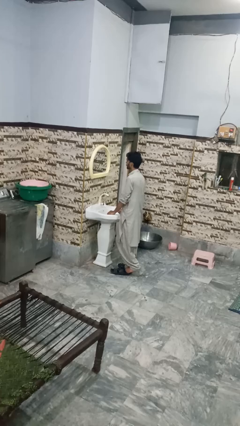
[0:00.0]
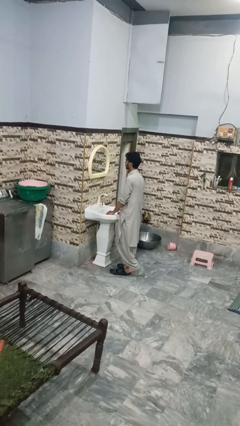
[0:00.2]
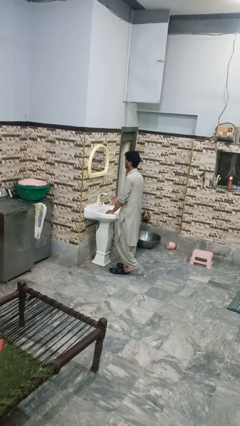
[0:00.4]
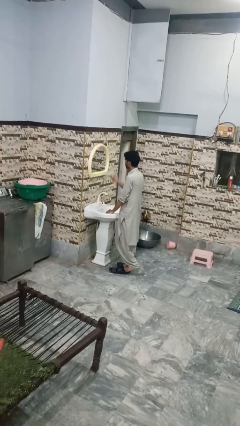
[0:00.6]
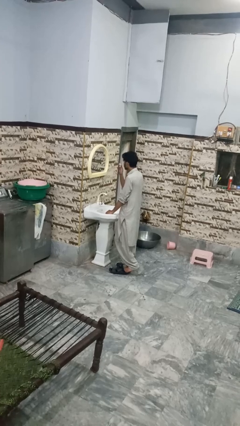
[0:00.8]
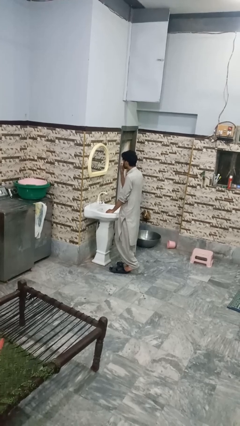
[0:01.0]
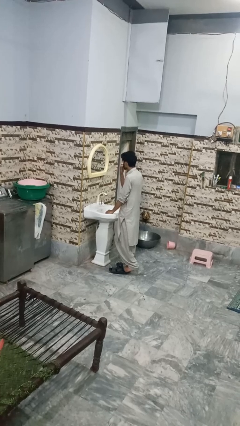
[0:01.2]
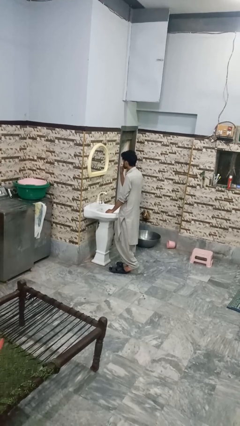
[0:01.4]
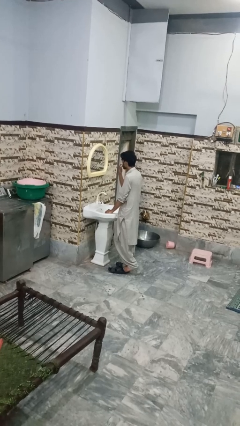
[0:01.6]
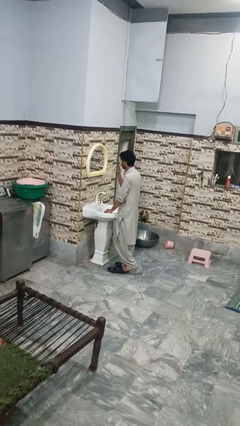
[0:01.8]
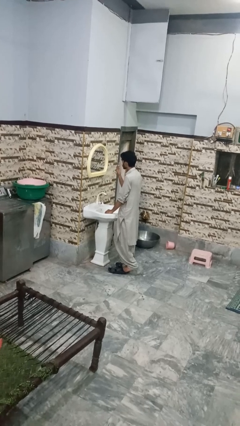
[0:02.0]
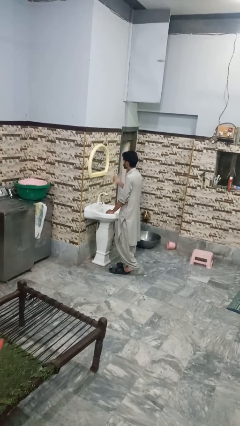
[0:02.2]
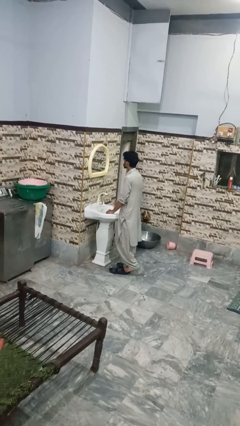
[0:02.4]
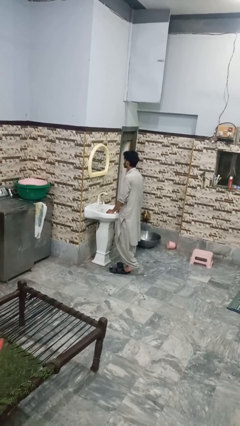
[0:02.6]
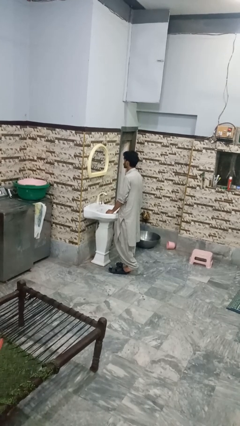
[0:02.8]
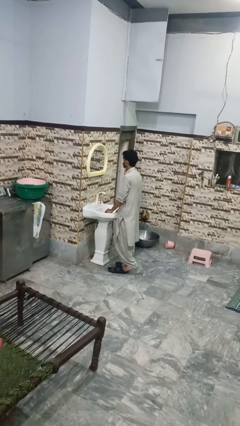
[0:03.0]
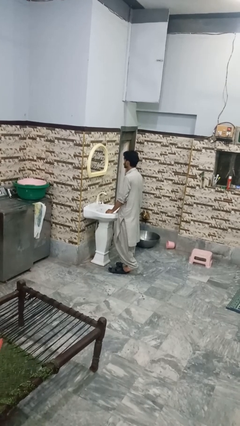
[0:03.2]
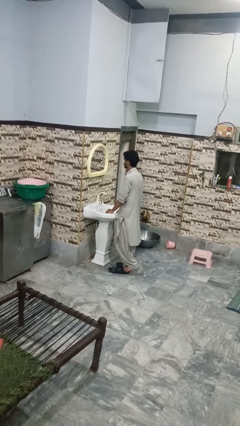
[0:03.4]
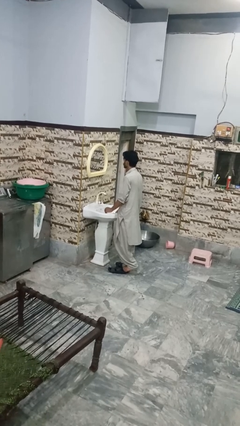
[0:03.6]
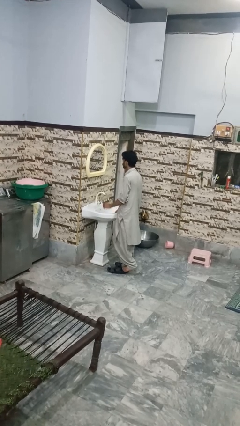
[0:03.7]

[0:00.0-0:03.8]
person applies shaving cream

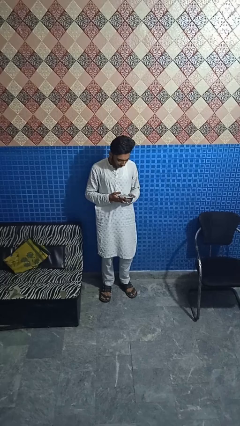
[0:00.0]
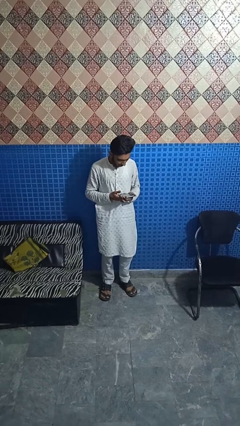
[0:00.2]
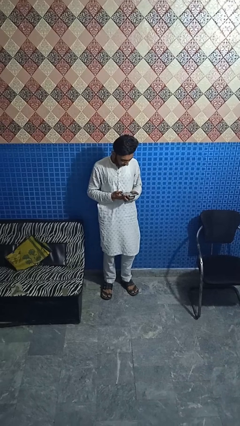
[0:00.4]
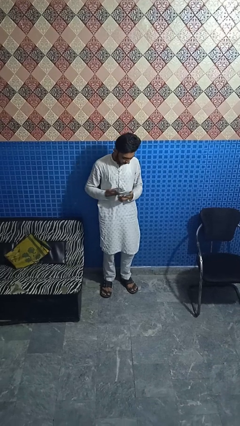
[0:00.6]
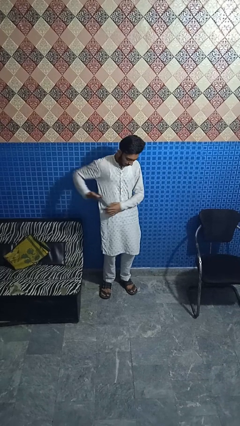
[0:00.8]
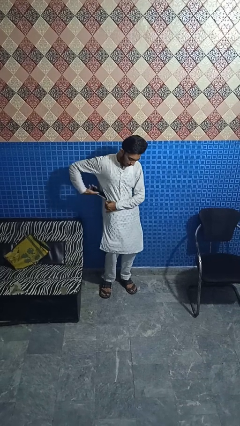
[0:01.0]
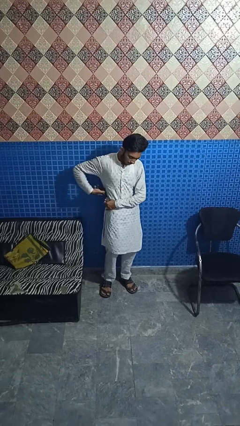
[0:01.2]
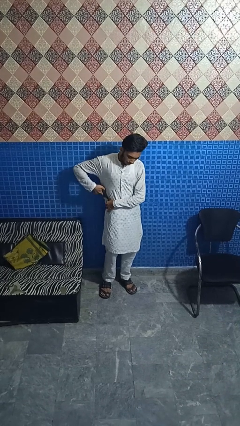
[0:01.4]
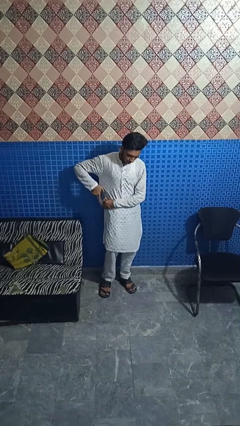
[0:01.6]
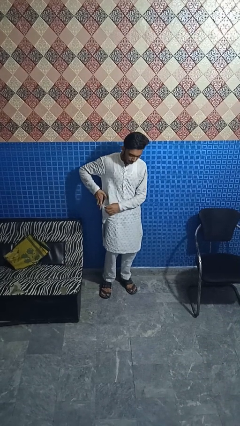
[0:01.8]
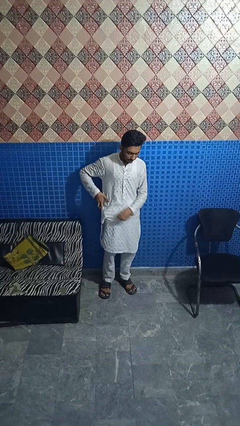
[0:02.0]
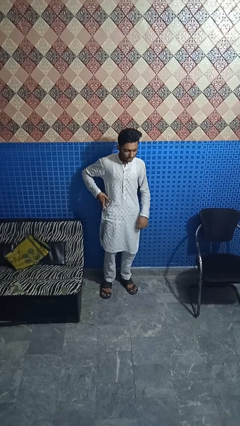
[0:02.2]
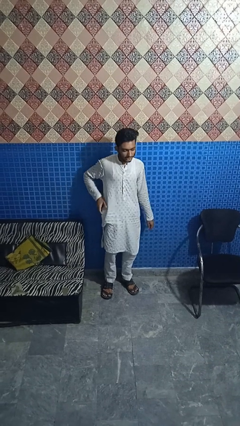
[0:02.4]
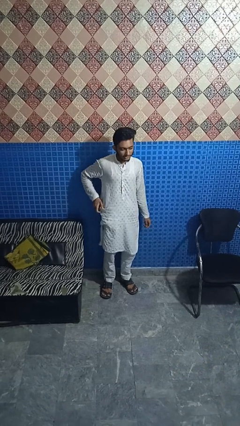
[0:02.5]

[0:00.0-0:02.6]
person puts phone into pocket

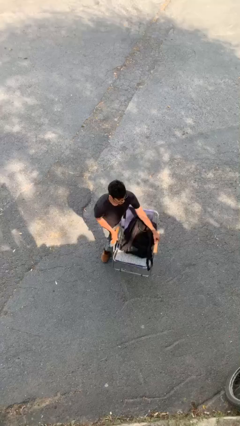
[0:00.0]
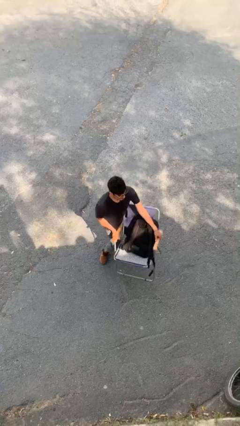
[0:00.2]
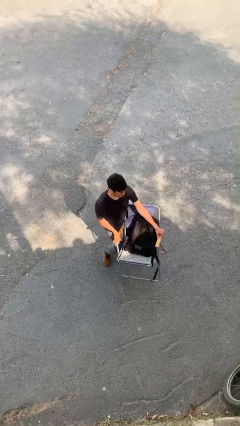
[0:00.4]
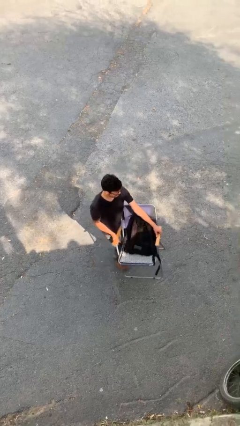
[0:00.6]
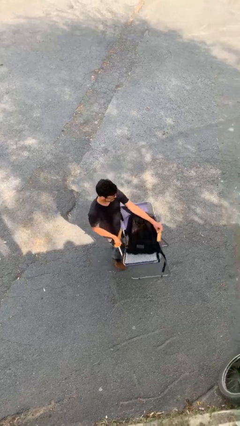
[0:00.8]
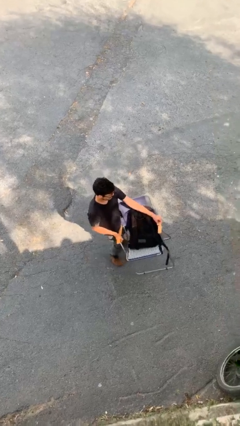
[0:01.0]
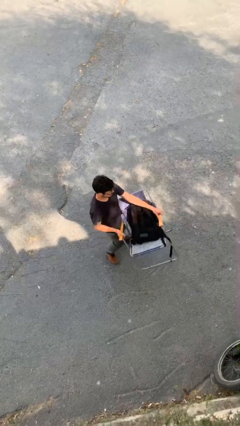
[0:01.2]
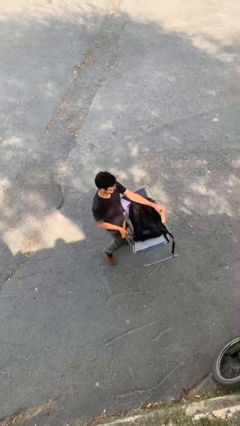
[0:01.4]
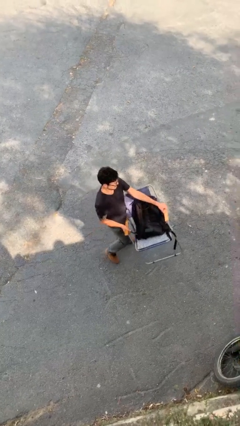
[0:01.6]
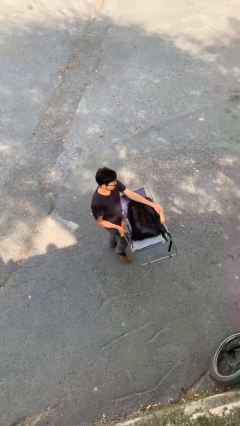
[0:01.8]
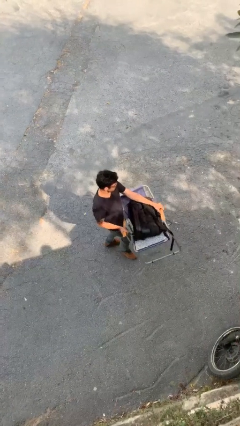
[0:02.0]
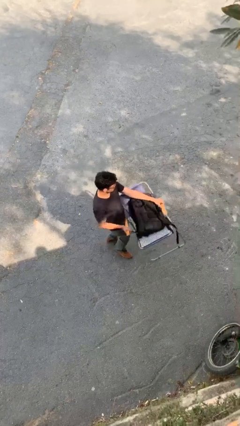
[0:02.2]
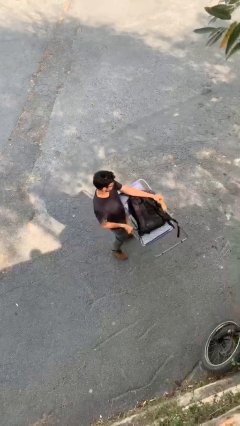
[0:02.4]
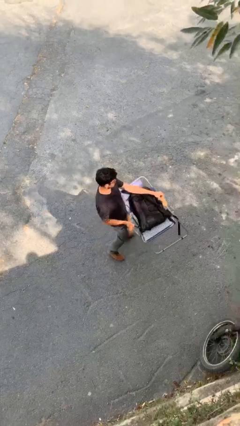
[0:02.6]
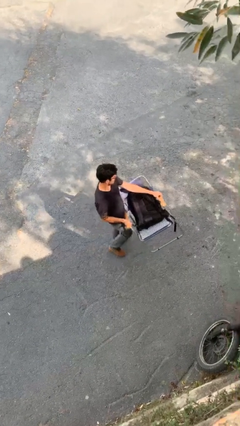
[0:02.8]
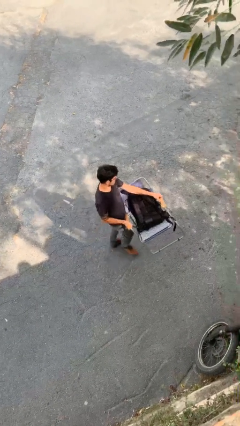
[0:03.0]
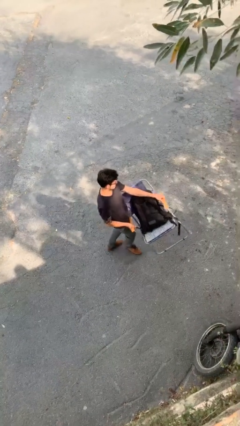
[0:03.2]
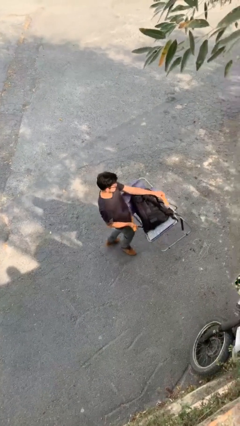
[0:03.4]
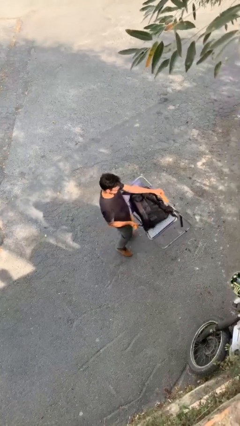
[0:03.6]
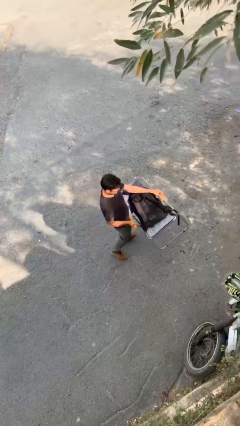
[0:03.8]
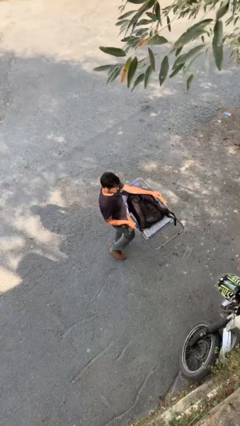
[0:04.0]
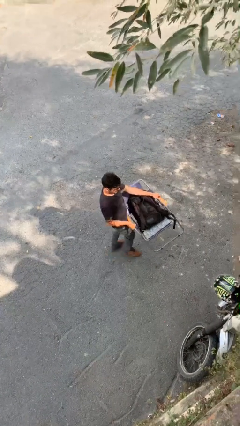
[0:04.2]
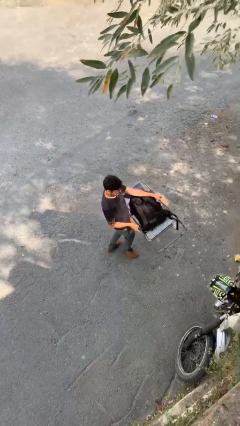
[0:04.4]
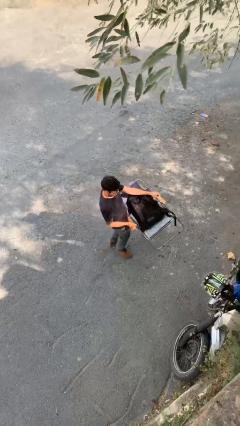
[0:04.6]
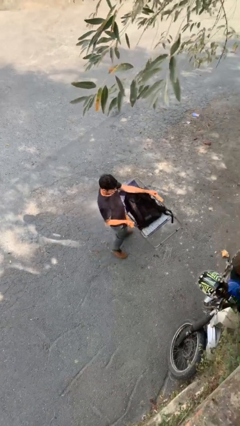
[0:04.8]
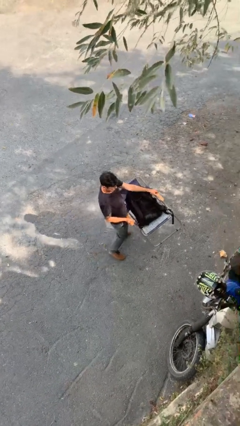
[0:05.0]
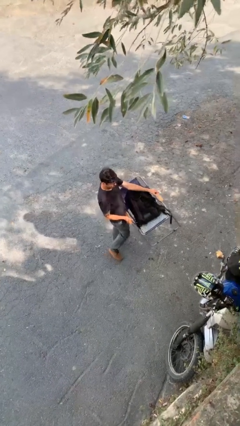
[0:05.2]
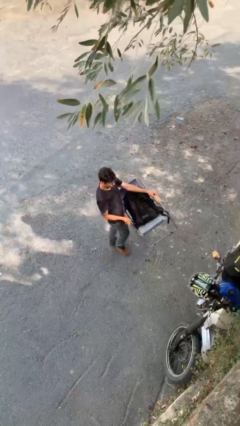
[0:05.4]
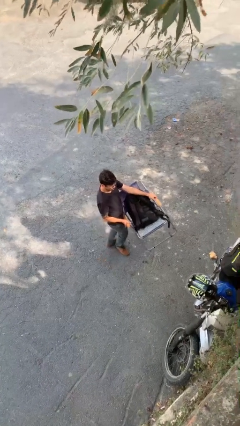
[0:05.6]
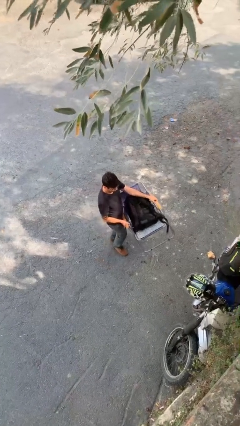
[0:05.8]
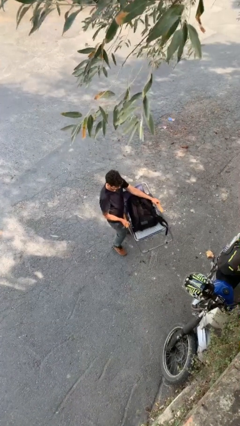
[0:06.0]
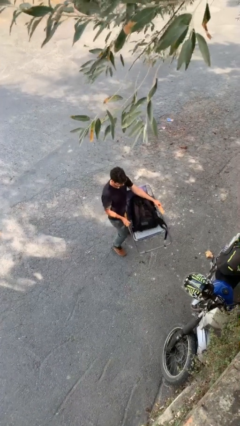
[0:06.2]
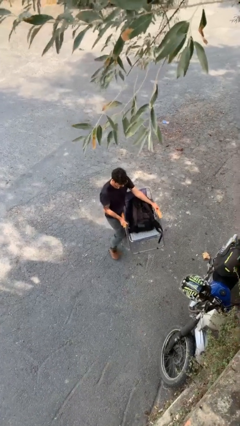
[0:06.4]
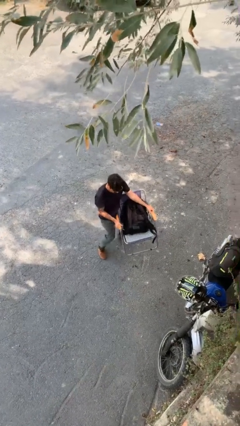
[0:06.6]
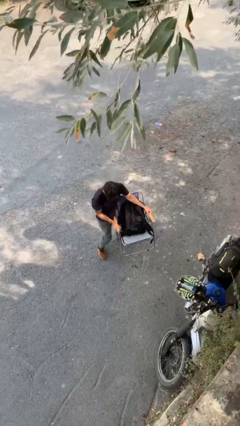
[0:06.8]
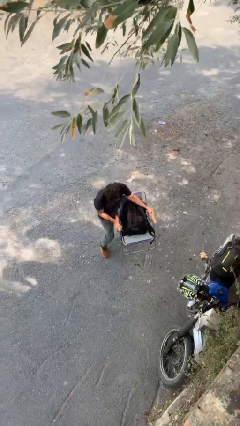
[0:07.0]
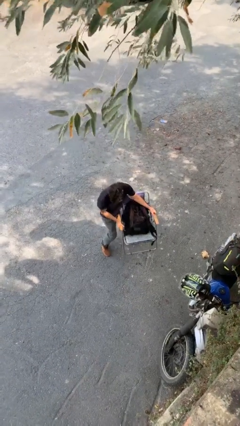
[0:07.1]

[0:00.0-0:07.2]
person carries heavy object

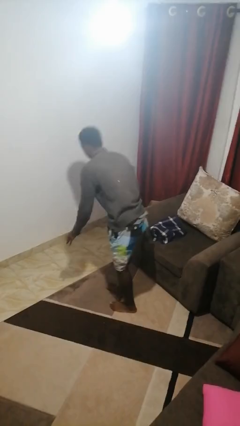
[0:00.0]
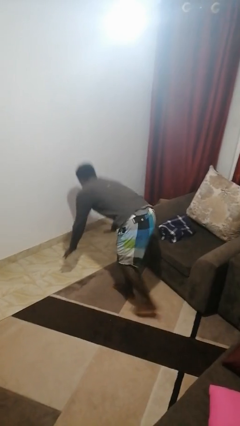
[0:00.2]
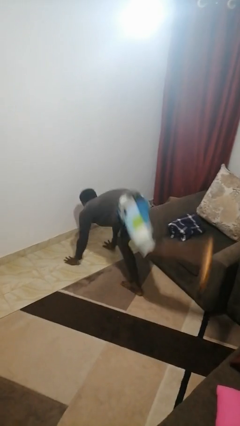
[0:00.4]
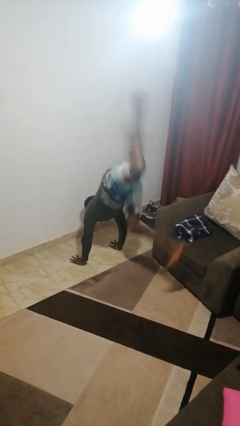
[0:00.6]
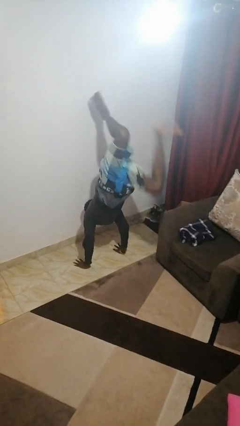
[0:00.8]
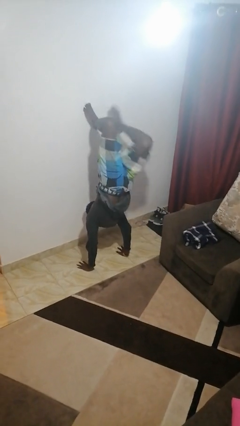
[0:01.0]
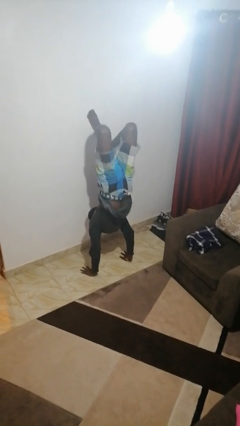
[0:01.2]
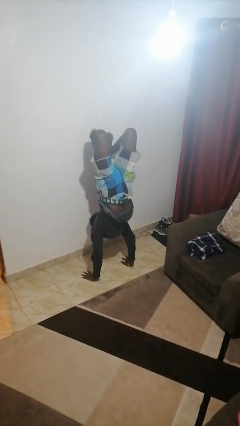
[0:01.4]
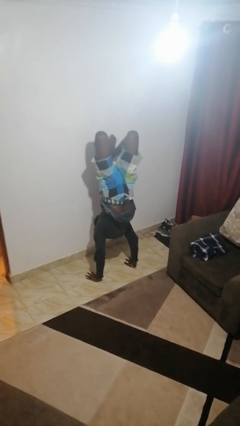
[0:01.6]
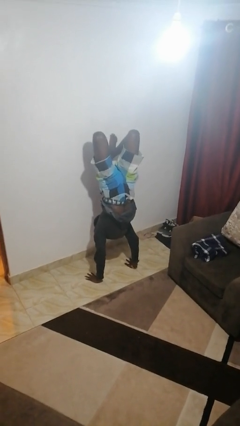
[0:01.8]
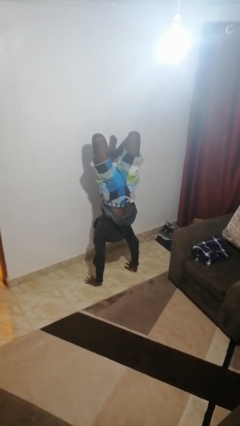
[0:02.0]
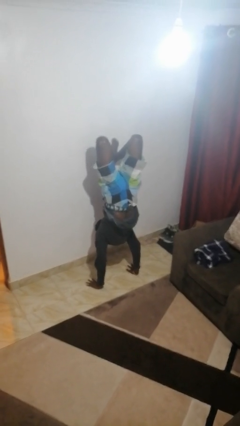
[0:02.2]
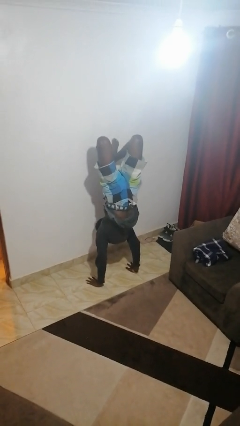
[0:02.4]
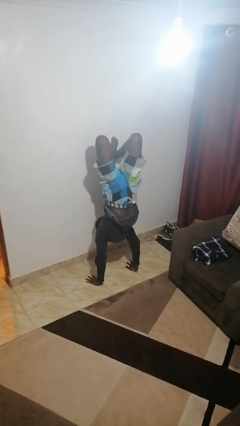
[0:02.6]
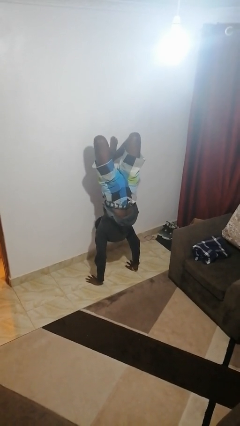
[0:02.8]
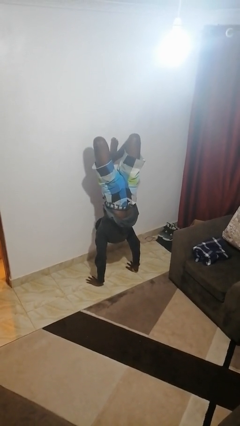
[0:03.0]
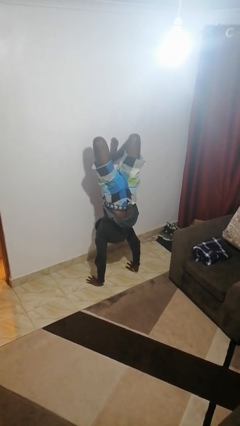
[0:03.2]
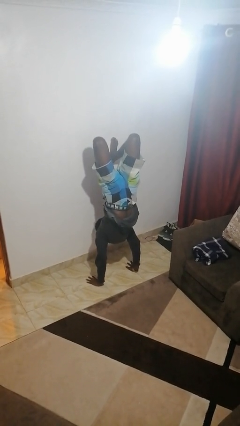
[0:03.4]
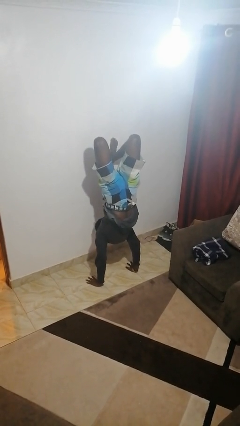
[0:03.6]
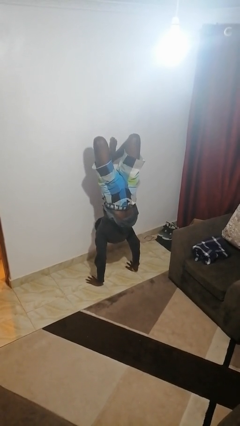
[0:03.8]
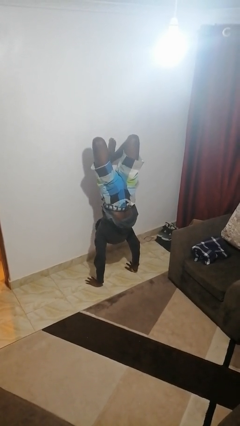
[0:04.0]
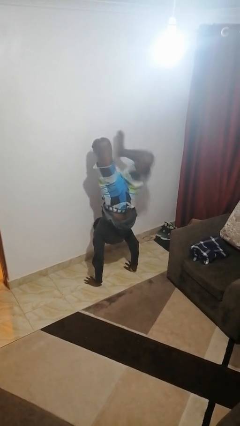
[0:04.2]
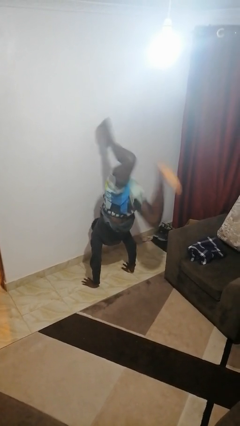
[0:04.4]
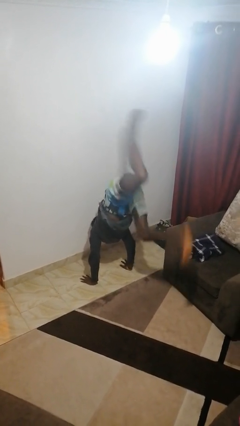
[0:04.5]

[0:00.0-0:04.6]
person handstand
